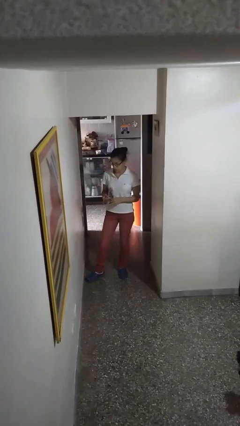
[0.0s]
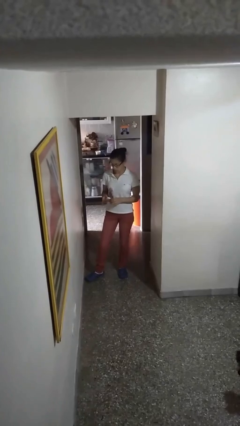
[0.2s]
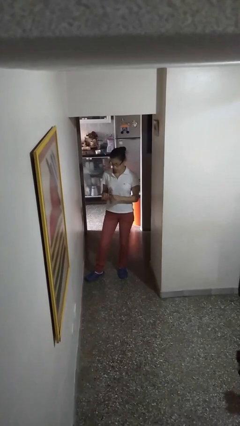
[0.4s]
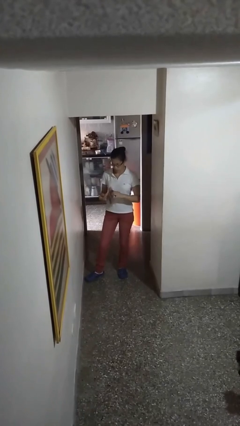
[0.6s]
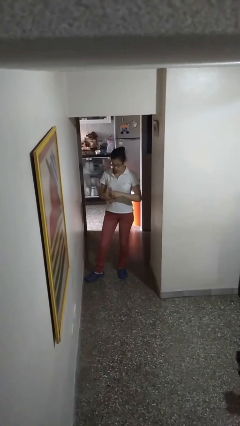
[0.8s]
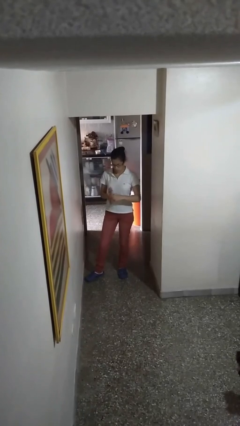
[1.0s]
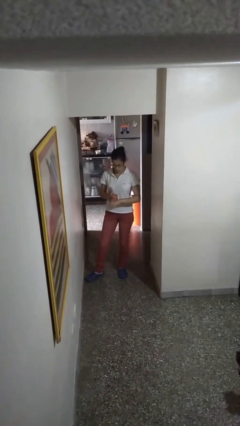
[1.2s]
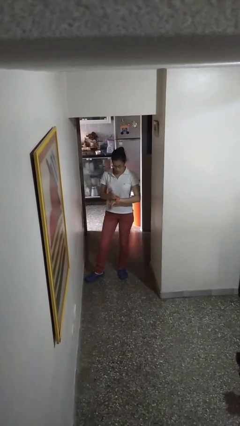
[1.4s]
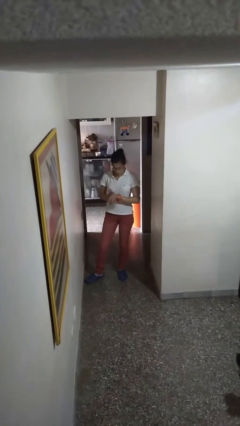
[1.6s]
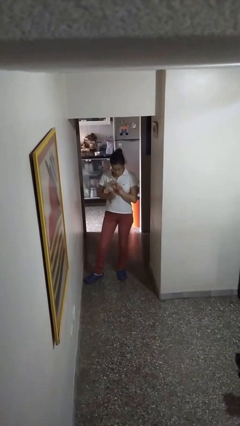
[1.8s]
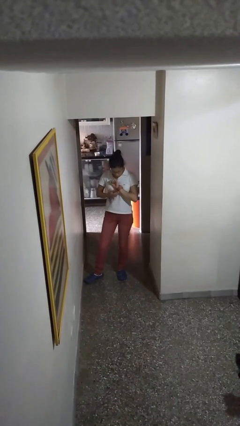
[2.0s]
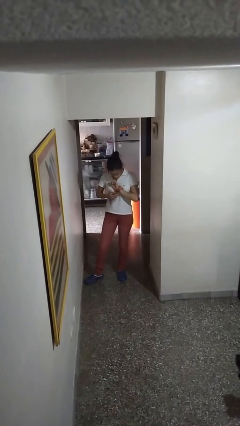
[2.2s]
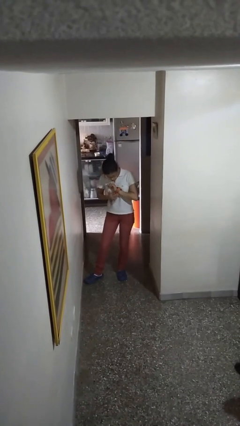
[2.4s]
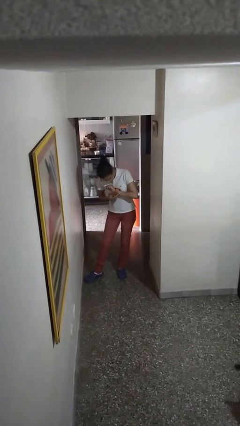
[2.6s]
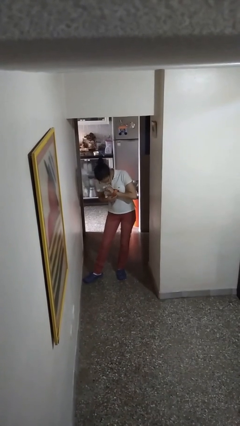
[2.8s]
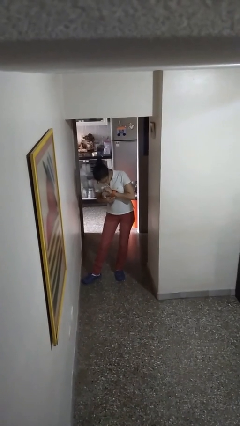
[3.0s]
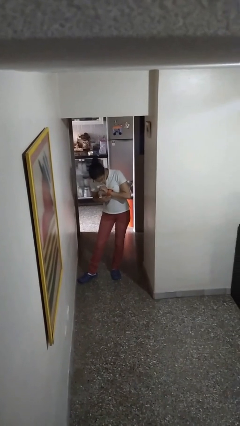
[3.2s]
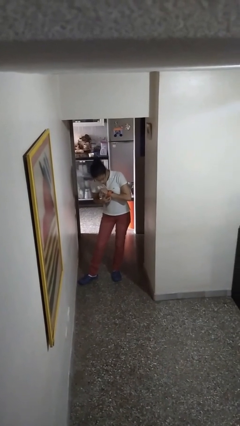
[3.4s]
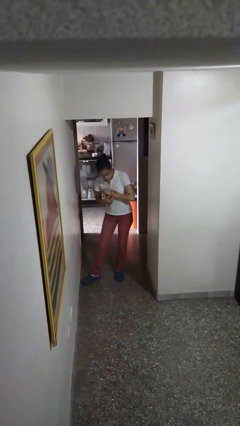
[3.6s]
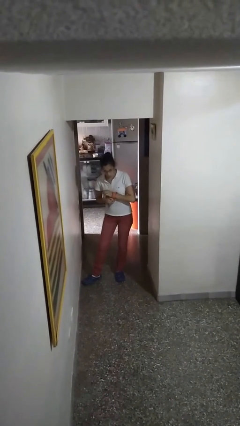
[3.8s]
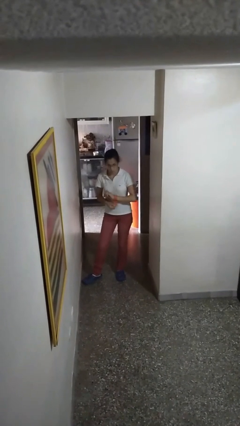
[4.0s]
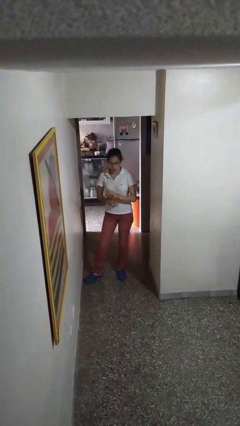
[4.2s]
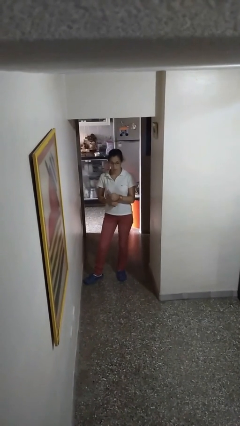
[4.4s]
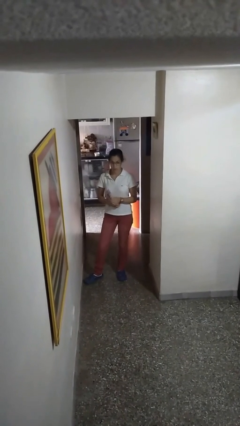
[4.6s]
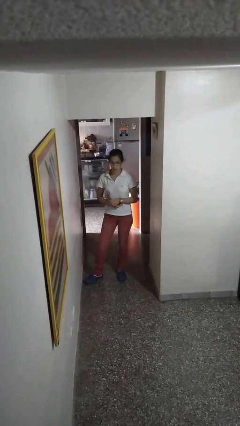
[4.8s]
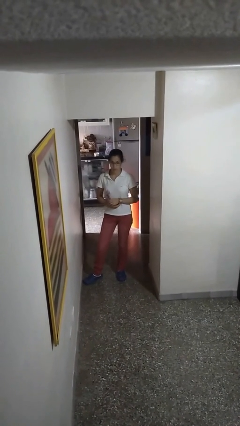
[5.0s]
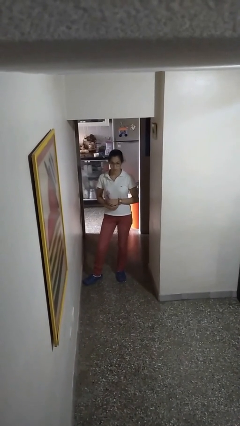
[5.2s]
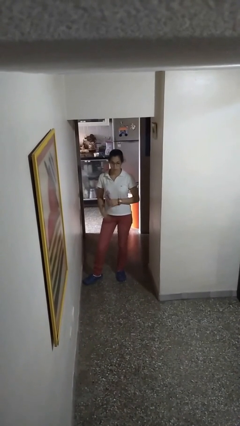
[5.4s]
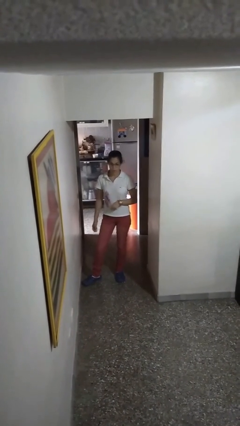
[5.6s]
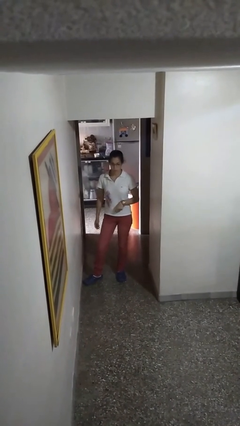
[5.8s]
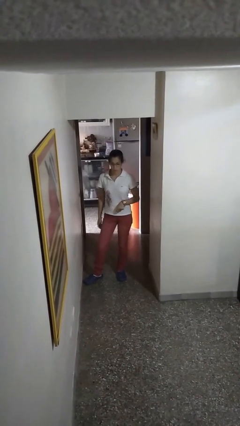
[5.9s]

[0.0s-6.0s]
person puts on wristwatch

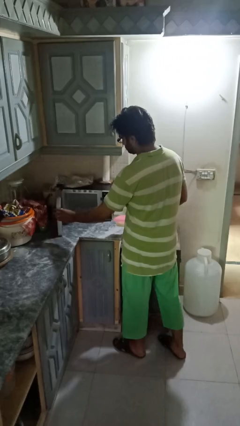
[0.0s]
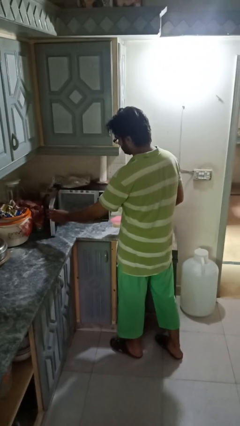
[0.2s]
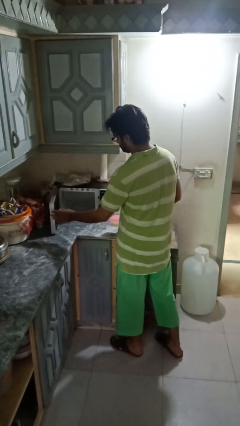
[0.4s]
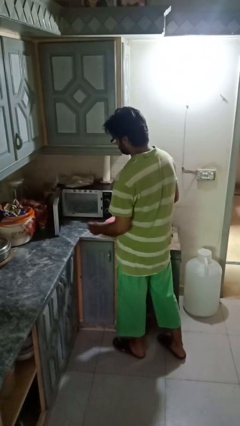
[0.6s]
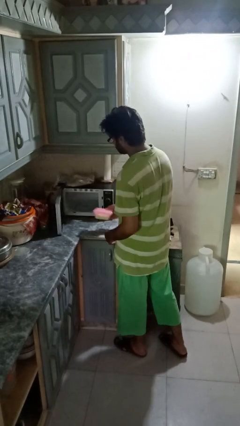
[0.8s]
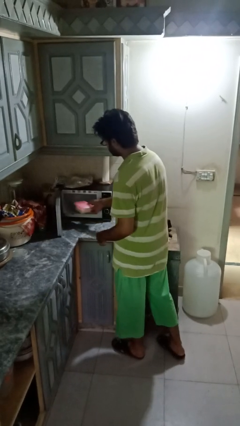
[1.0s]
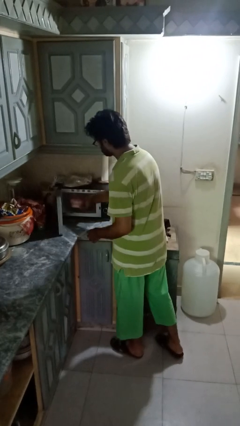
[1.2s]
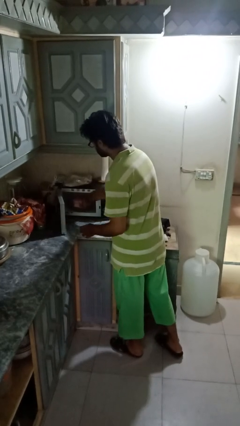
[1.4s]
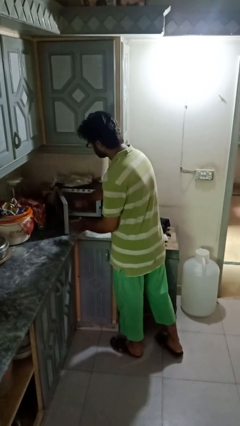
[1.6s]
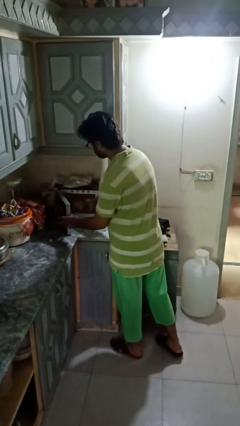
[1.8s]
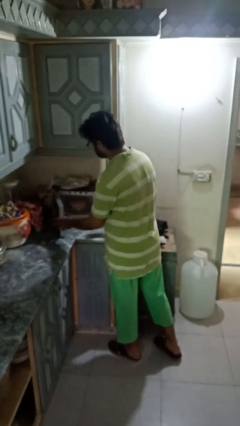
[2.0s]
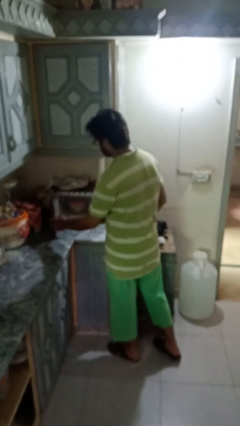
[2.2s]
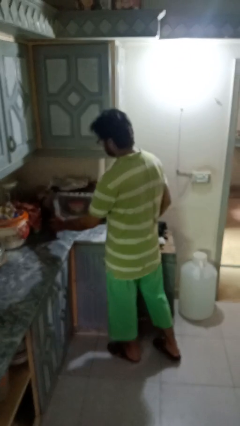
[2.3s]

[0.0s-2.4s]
person puts object into microwave

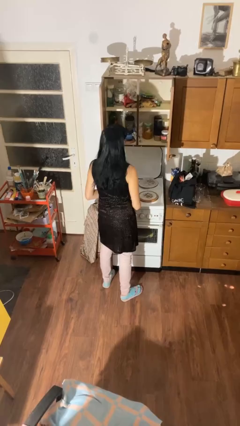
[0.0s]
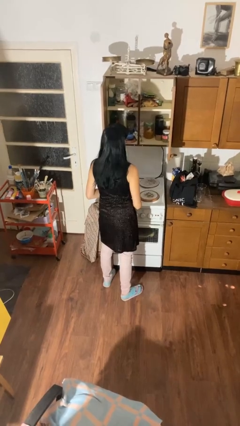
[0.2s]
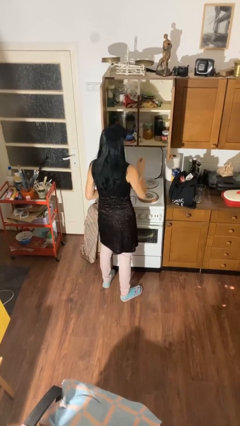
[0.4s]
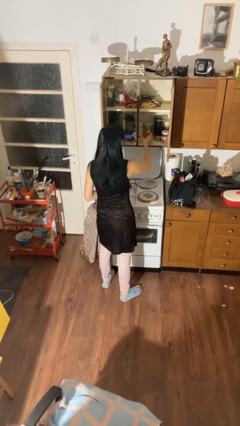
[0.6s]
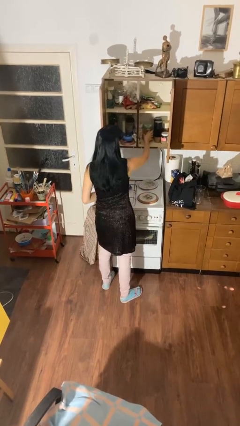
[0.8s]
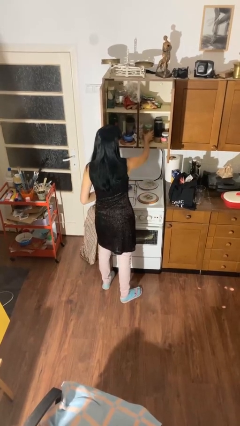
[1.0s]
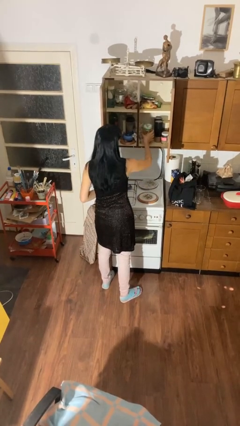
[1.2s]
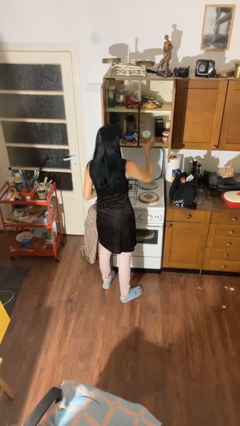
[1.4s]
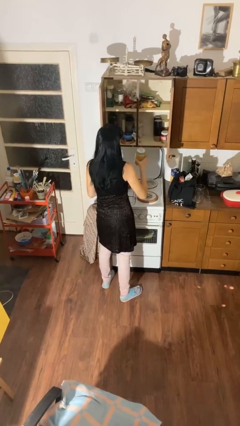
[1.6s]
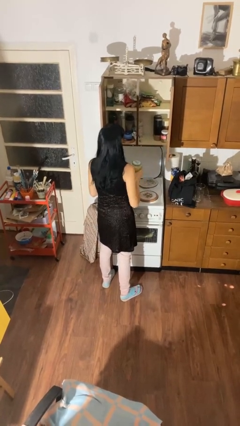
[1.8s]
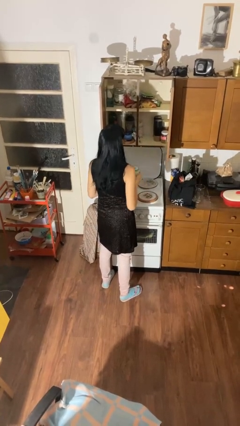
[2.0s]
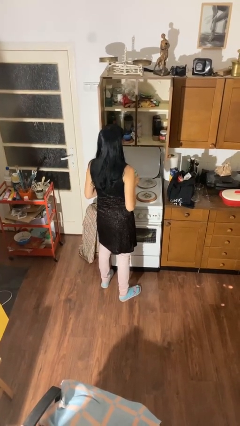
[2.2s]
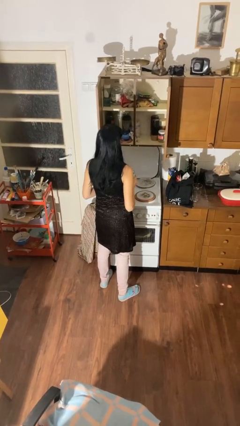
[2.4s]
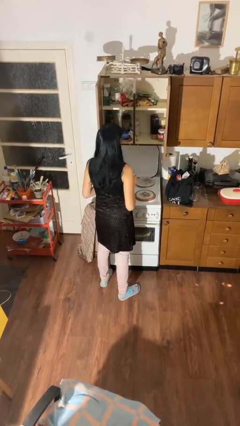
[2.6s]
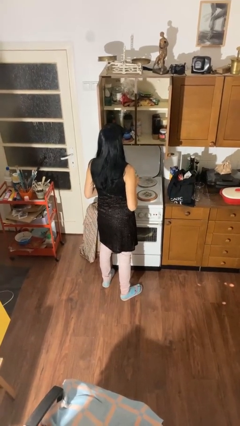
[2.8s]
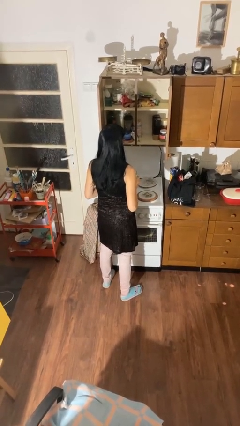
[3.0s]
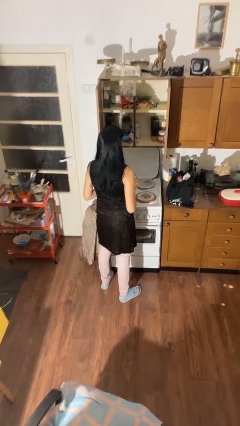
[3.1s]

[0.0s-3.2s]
person picks up object from cabinet

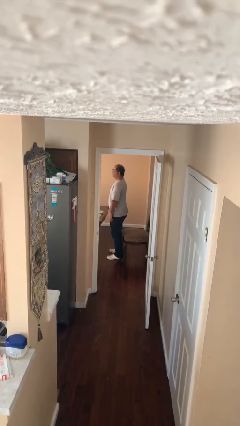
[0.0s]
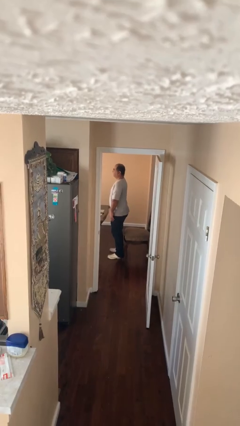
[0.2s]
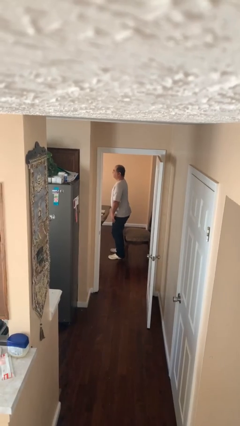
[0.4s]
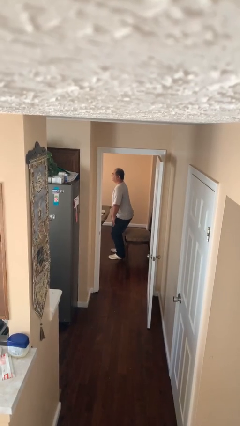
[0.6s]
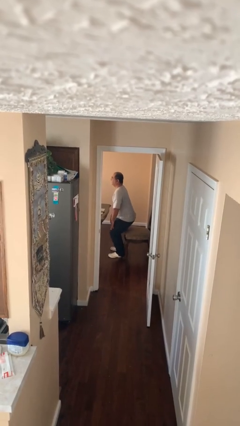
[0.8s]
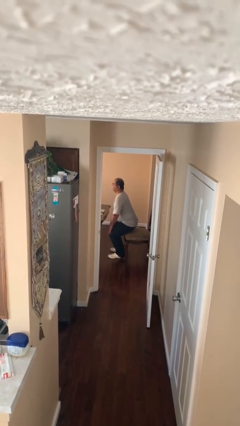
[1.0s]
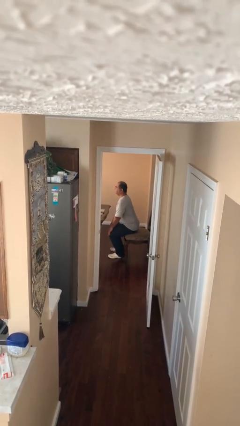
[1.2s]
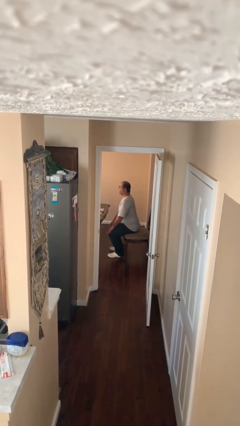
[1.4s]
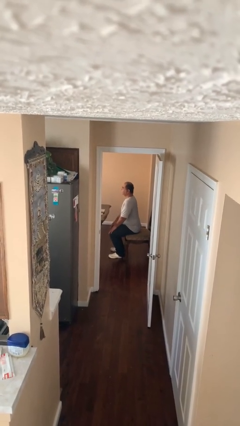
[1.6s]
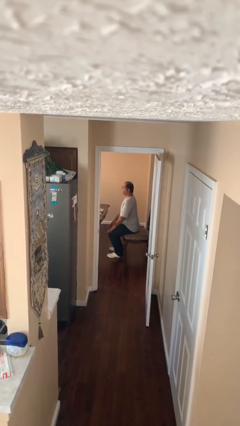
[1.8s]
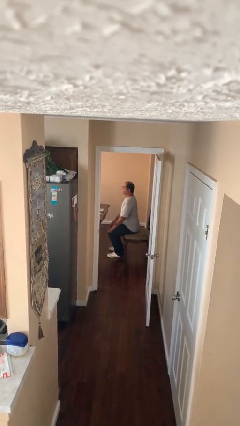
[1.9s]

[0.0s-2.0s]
person sits down

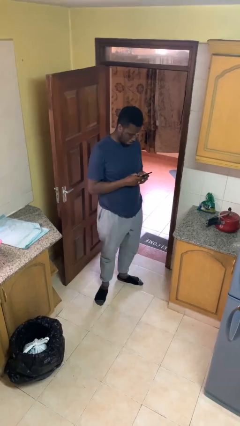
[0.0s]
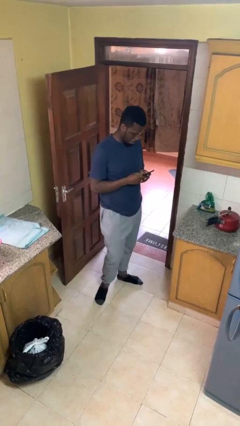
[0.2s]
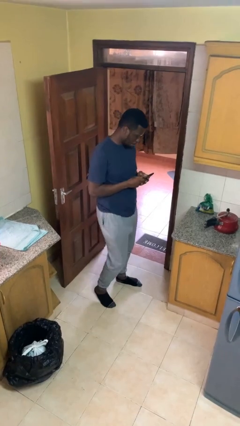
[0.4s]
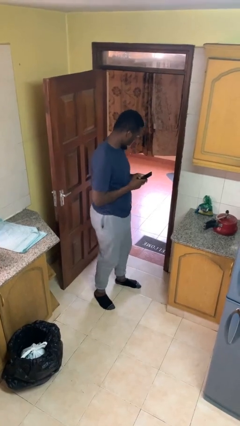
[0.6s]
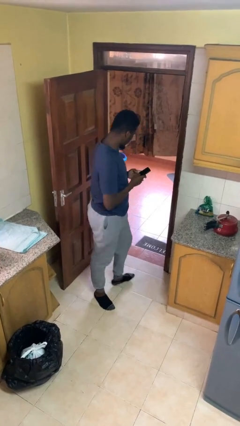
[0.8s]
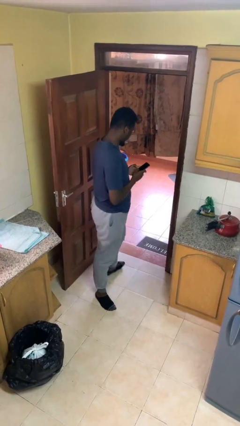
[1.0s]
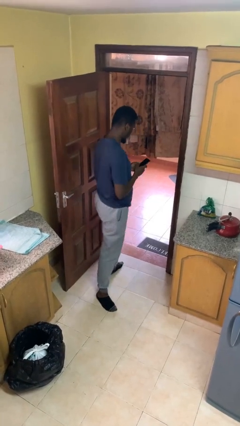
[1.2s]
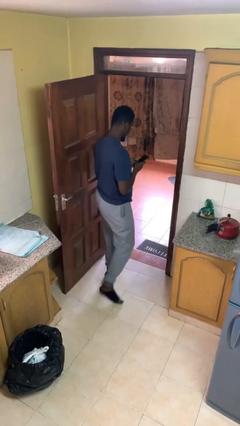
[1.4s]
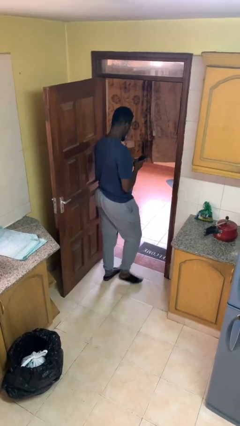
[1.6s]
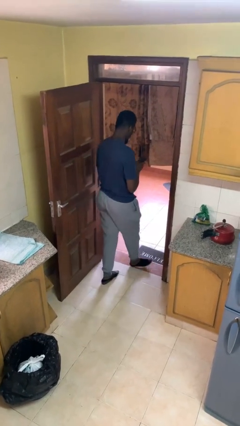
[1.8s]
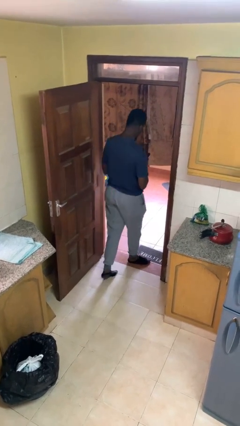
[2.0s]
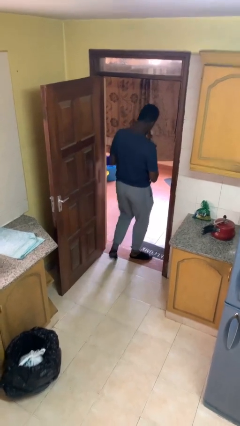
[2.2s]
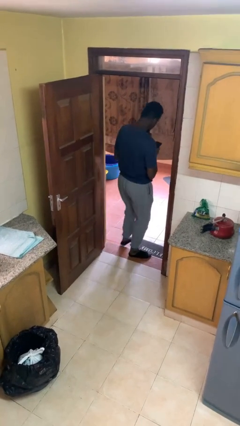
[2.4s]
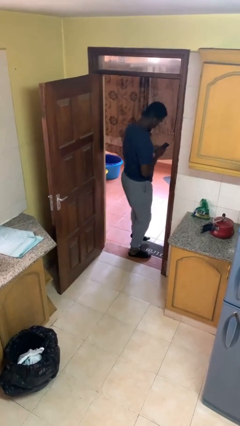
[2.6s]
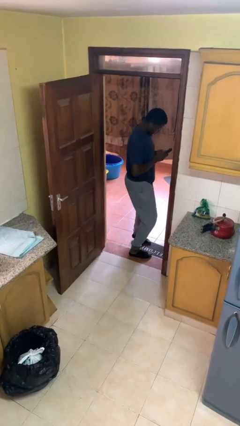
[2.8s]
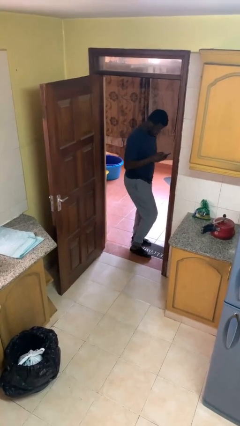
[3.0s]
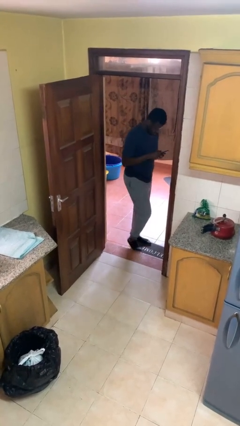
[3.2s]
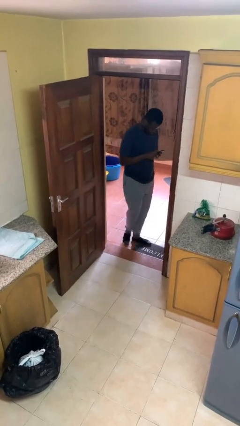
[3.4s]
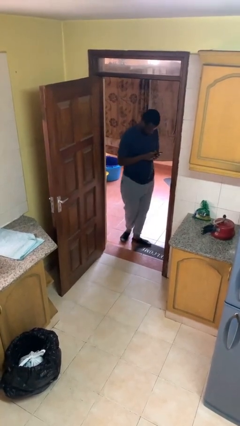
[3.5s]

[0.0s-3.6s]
person exits scene through structure

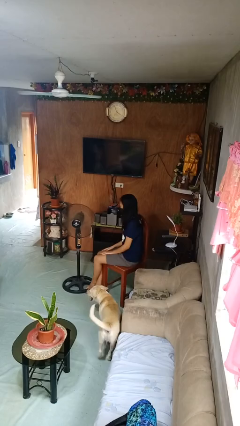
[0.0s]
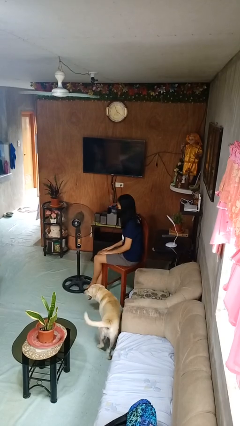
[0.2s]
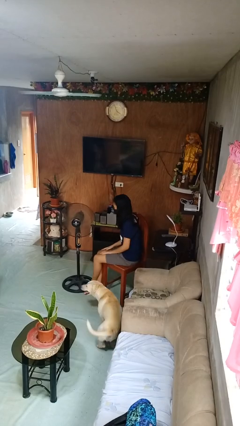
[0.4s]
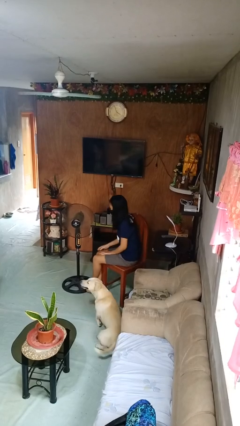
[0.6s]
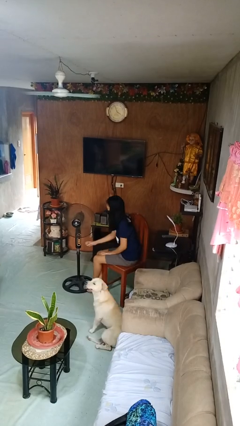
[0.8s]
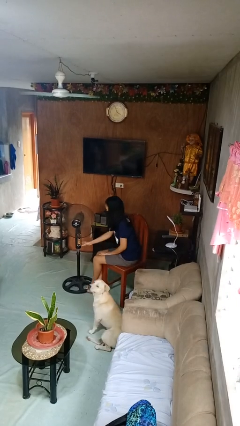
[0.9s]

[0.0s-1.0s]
person turns off fan
